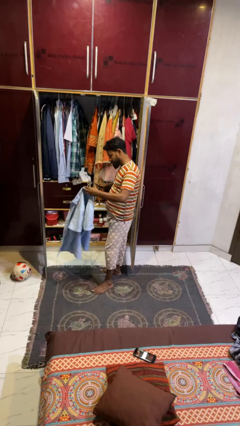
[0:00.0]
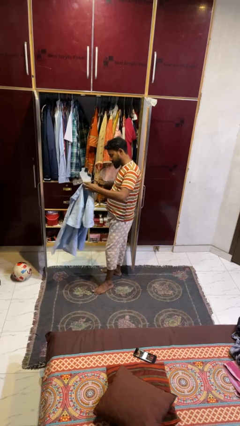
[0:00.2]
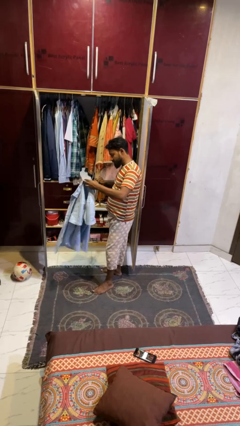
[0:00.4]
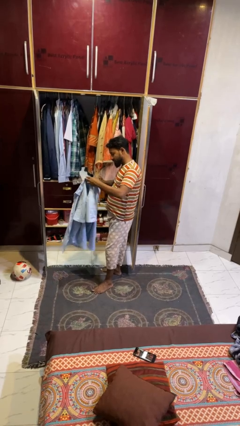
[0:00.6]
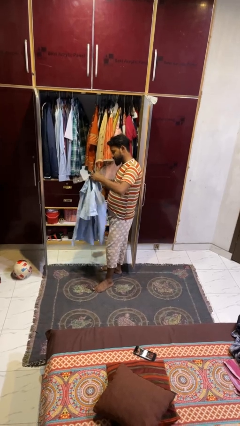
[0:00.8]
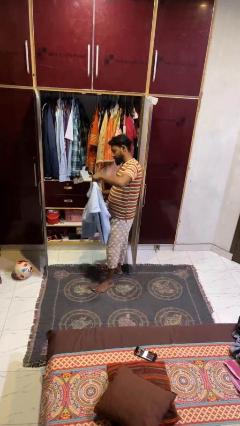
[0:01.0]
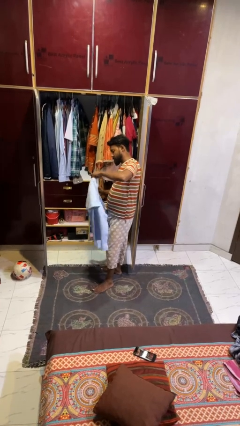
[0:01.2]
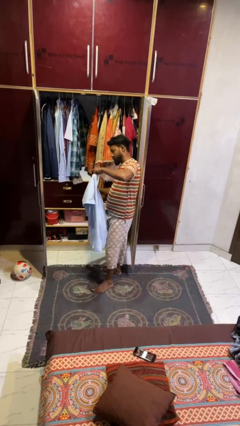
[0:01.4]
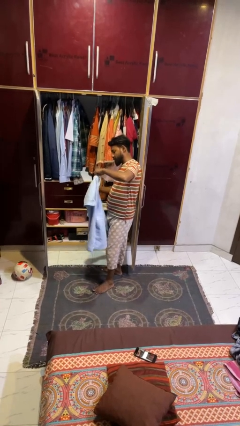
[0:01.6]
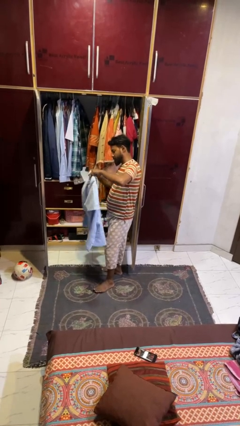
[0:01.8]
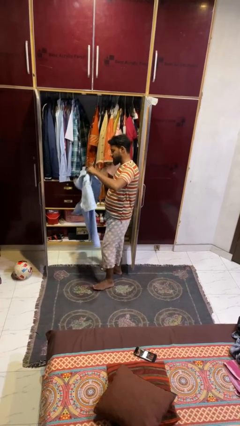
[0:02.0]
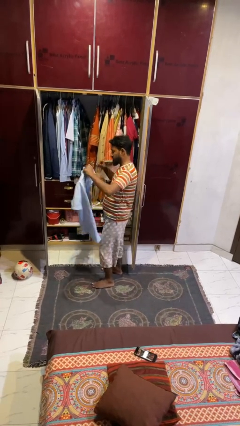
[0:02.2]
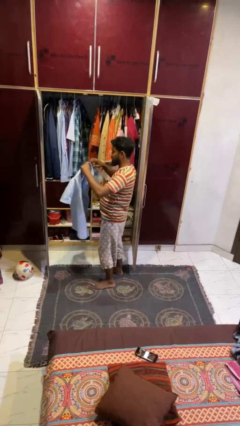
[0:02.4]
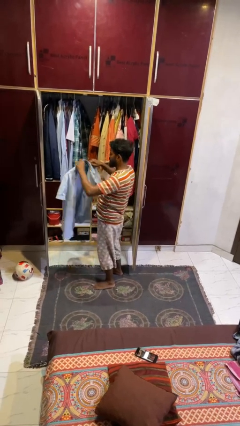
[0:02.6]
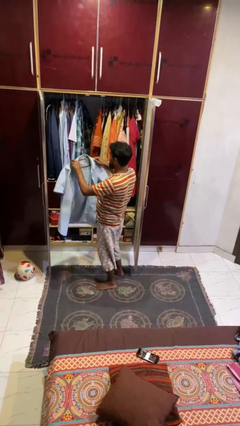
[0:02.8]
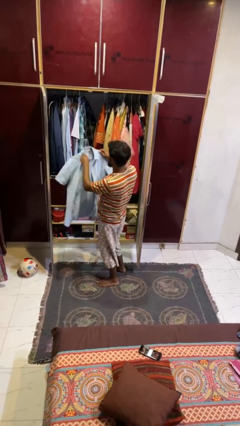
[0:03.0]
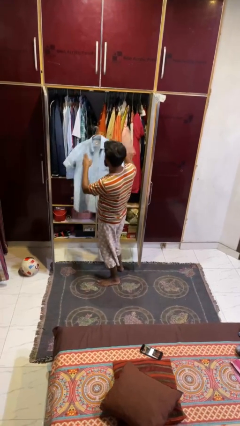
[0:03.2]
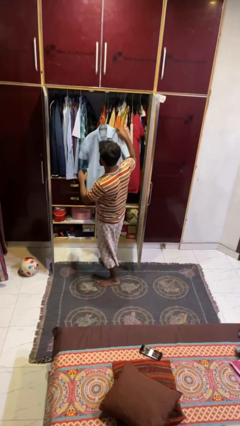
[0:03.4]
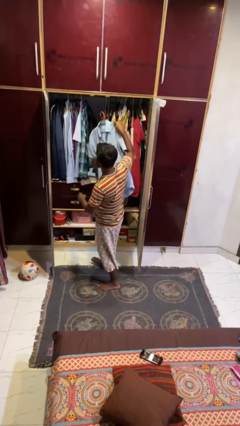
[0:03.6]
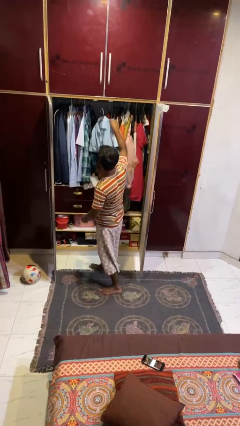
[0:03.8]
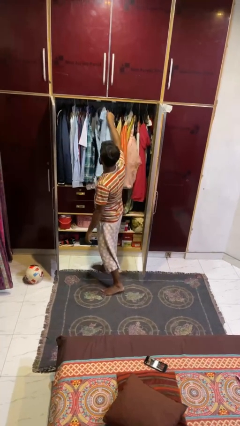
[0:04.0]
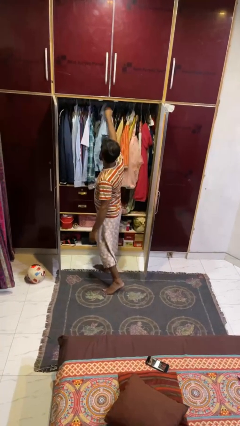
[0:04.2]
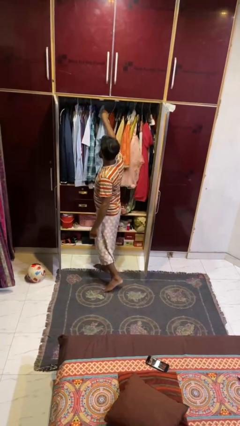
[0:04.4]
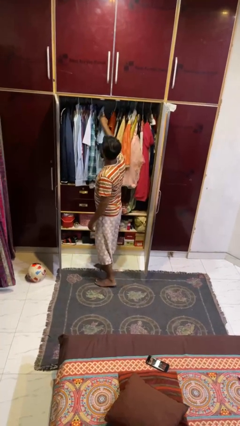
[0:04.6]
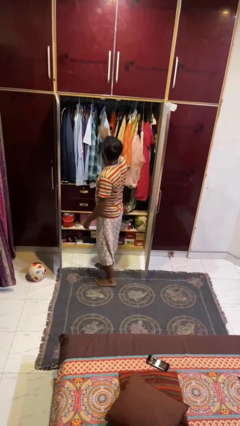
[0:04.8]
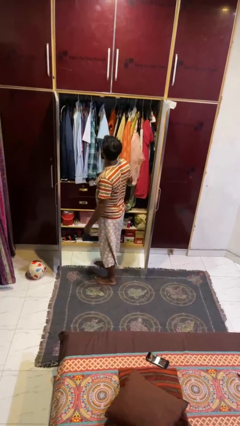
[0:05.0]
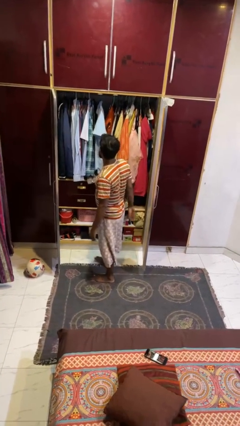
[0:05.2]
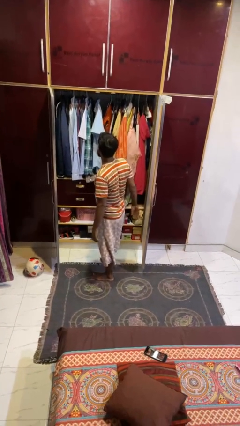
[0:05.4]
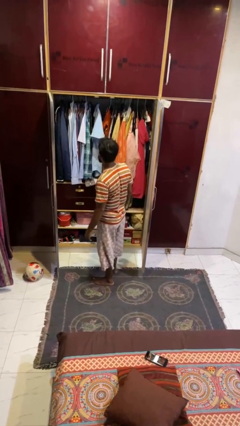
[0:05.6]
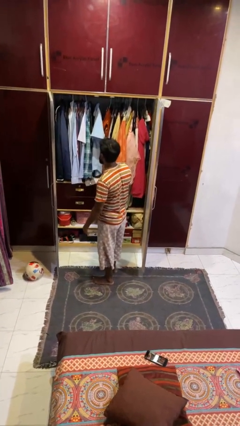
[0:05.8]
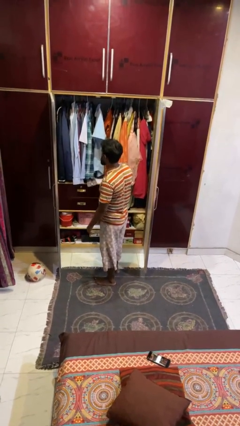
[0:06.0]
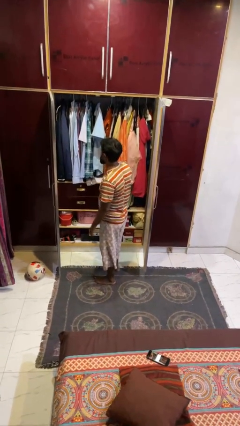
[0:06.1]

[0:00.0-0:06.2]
person puts clothes into closet

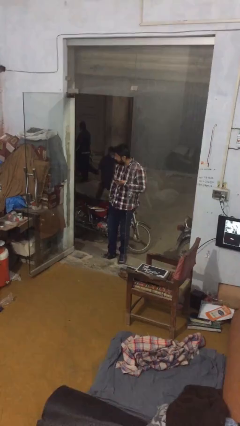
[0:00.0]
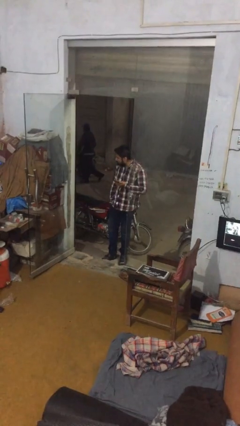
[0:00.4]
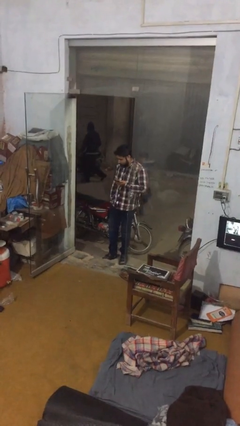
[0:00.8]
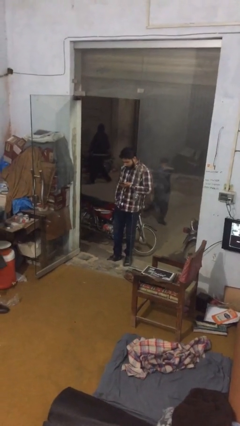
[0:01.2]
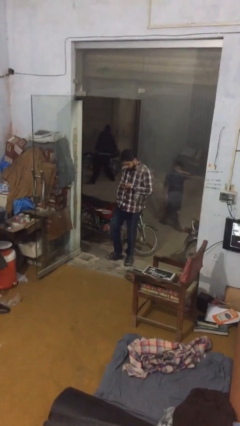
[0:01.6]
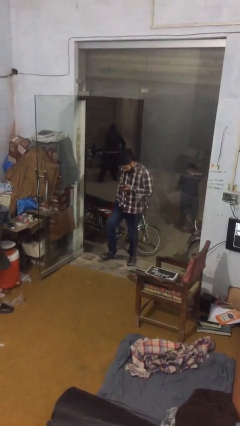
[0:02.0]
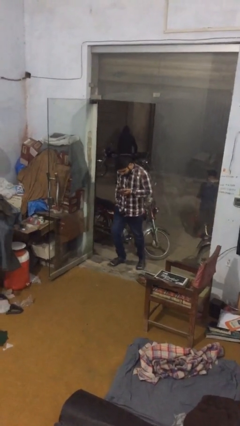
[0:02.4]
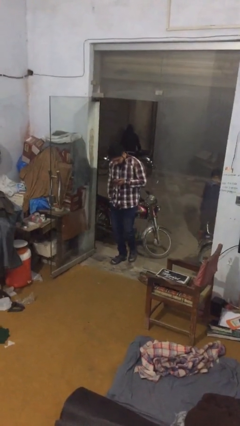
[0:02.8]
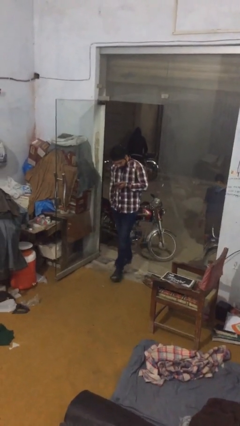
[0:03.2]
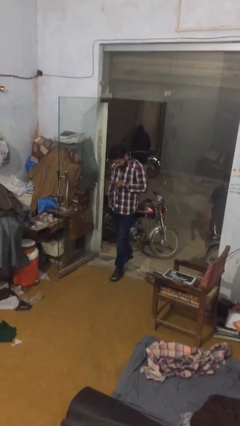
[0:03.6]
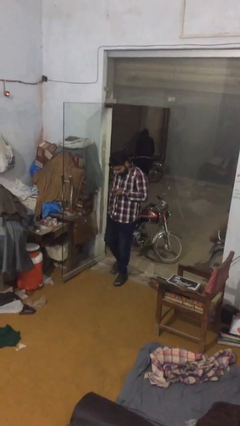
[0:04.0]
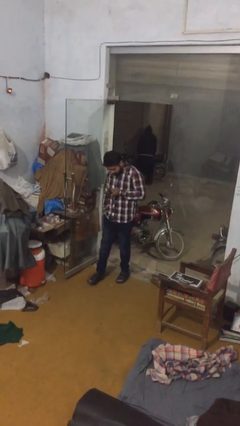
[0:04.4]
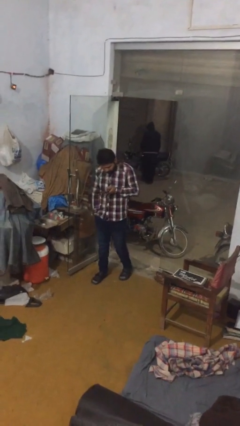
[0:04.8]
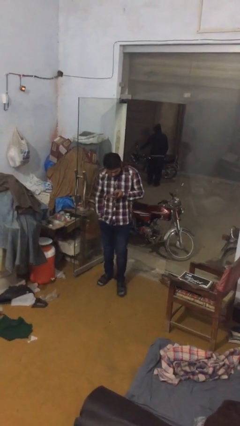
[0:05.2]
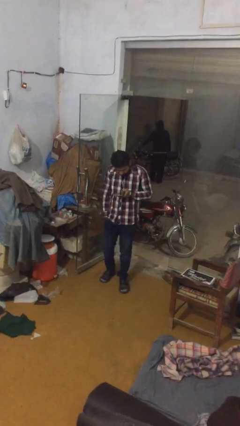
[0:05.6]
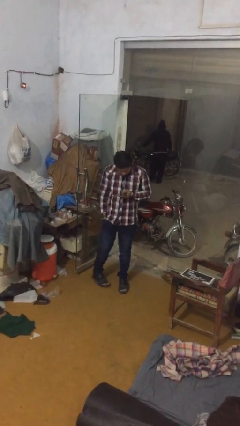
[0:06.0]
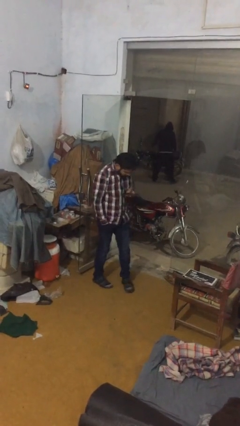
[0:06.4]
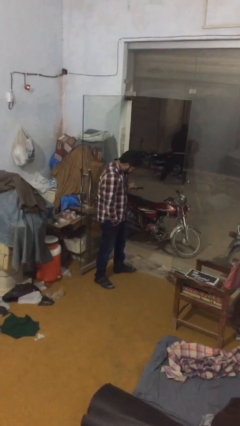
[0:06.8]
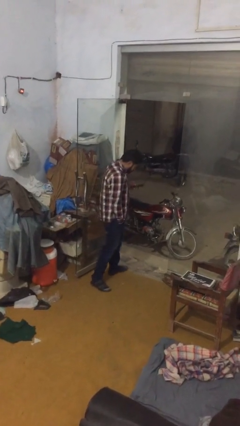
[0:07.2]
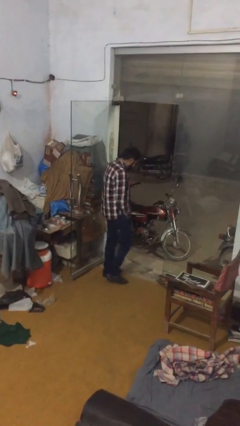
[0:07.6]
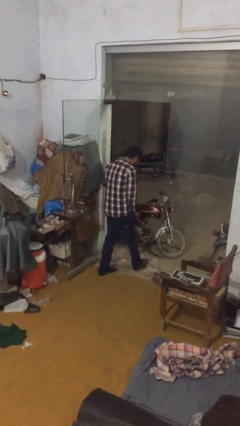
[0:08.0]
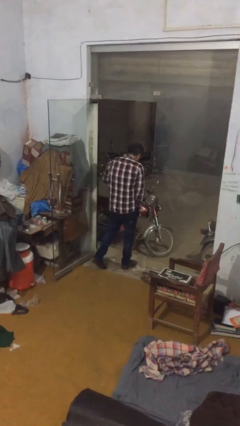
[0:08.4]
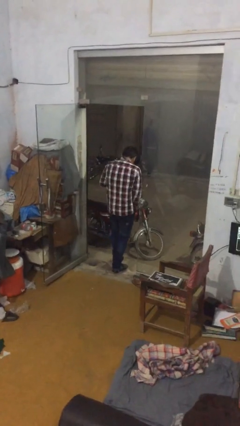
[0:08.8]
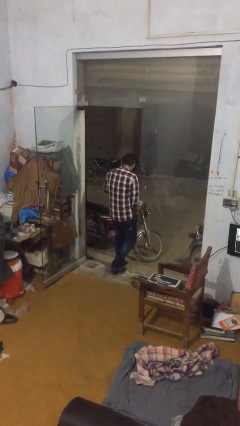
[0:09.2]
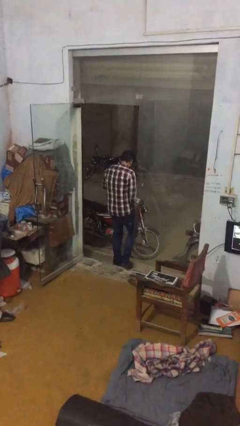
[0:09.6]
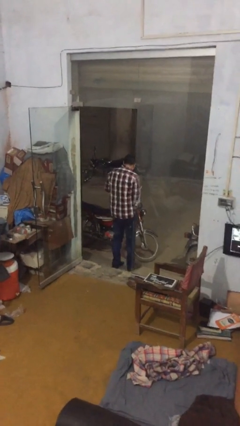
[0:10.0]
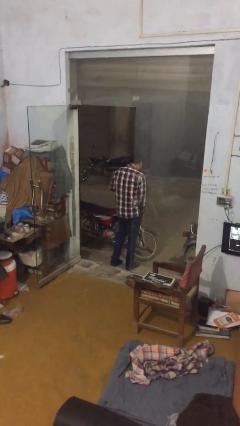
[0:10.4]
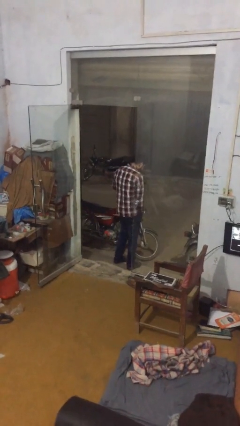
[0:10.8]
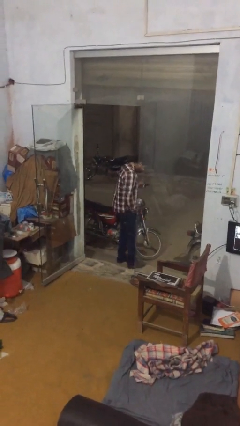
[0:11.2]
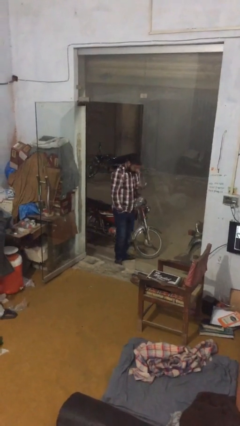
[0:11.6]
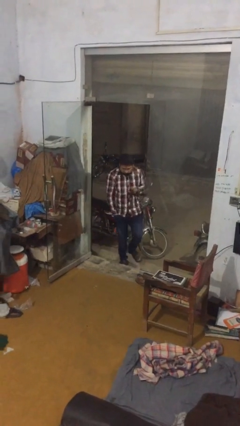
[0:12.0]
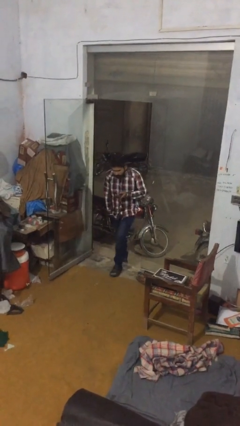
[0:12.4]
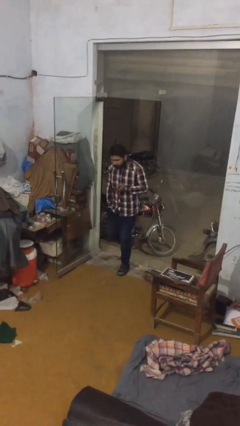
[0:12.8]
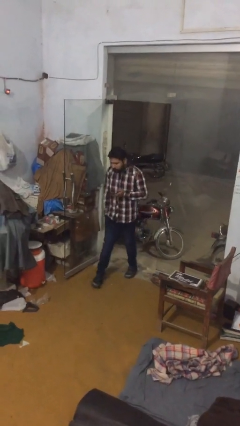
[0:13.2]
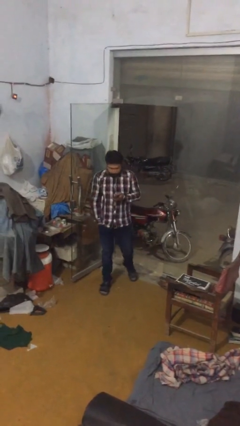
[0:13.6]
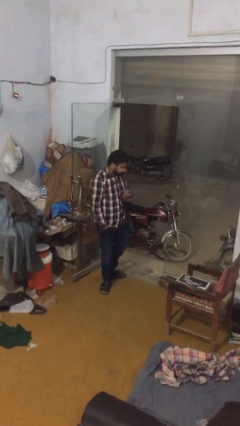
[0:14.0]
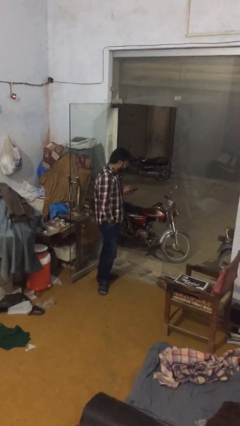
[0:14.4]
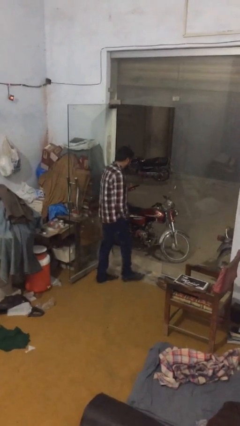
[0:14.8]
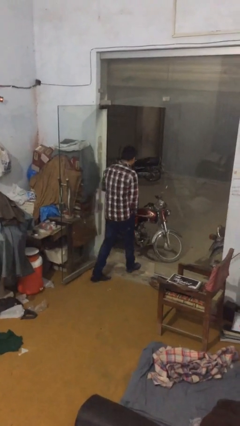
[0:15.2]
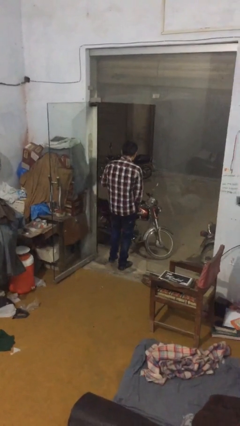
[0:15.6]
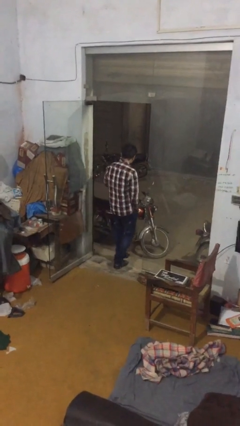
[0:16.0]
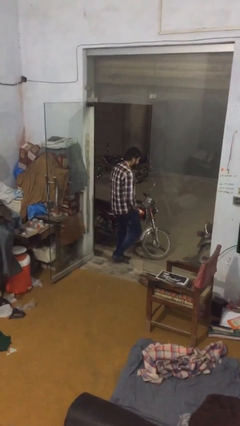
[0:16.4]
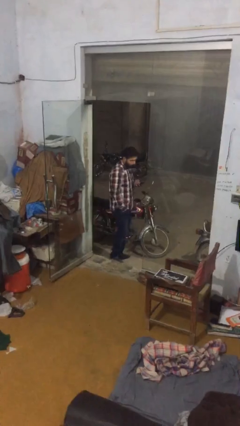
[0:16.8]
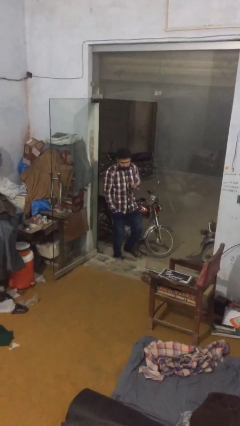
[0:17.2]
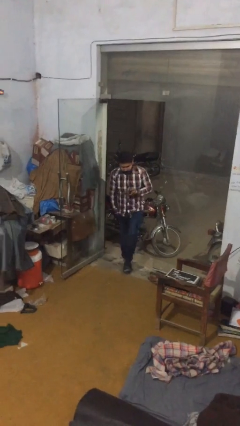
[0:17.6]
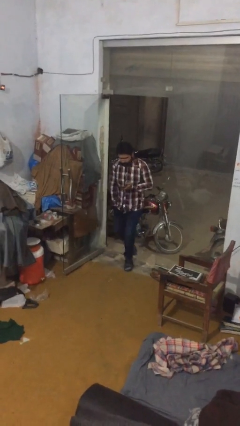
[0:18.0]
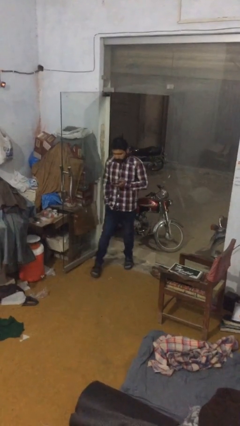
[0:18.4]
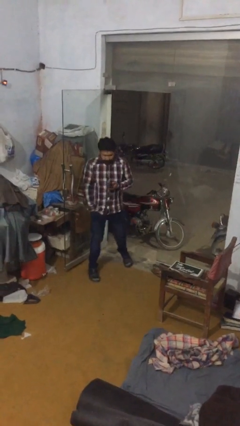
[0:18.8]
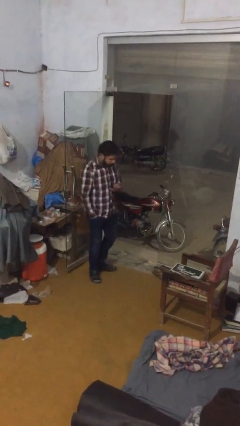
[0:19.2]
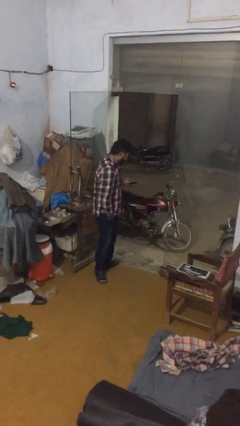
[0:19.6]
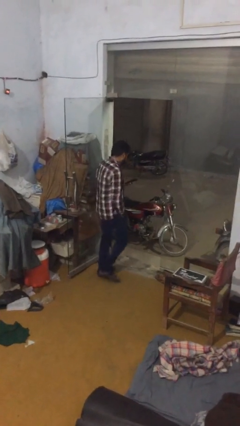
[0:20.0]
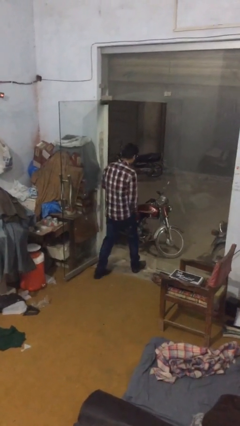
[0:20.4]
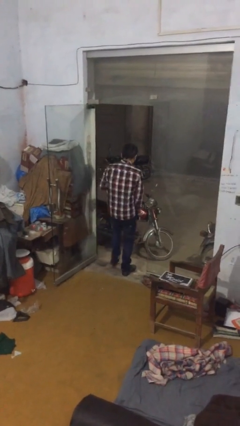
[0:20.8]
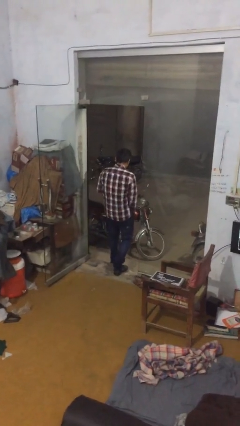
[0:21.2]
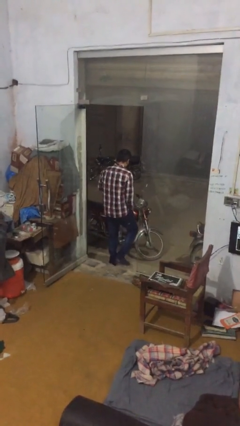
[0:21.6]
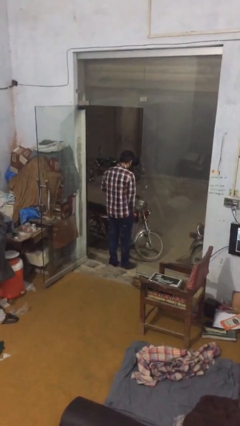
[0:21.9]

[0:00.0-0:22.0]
person texts on phone

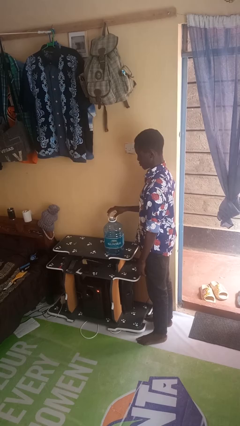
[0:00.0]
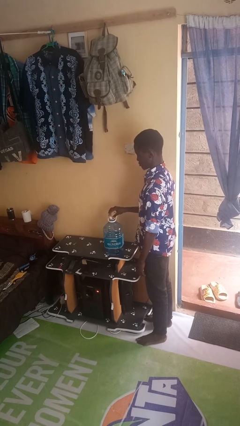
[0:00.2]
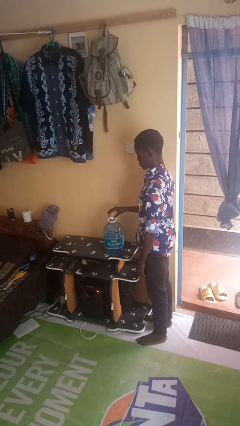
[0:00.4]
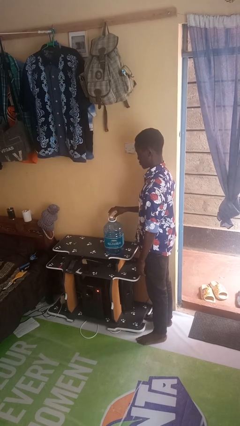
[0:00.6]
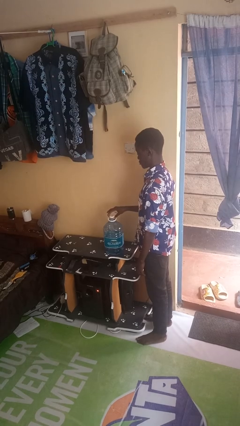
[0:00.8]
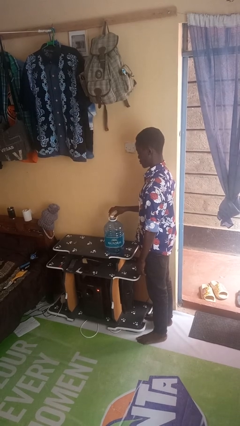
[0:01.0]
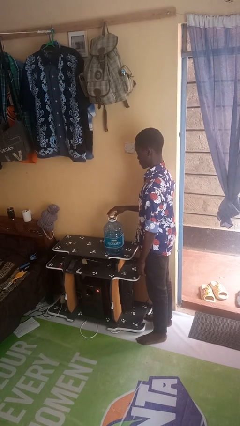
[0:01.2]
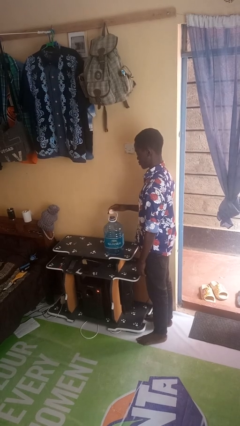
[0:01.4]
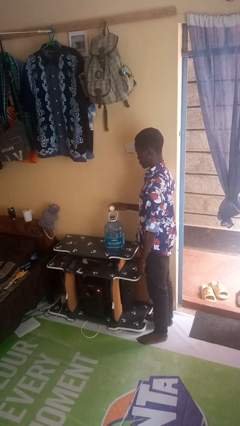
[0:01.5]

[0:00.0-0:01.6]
person unscrews lid from bottle
